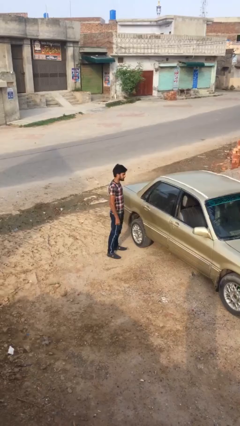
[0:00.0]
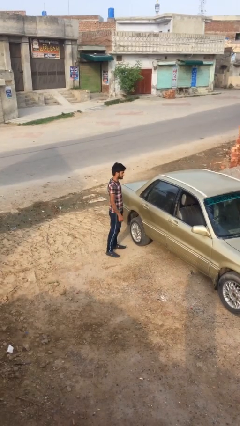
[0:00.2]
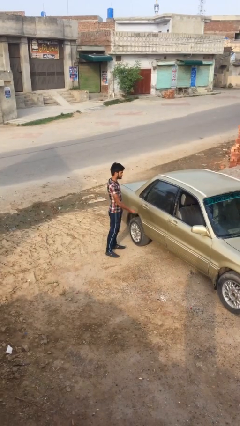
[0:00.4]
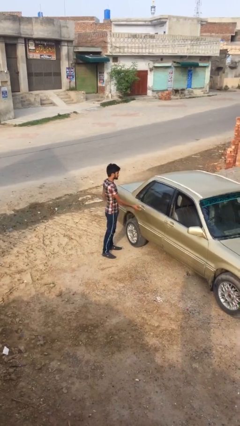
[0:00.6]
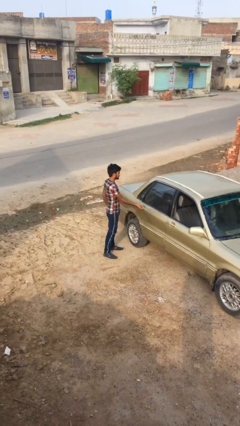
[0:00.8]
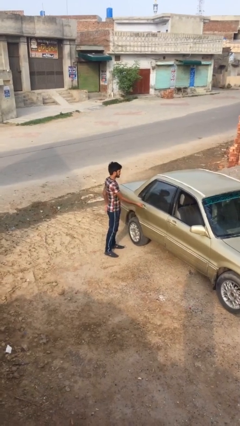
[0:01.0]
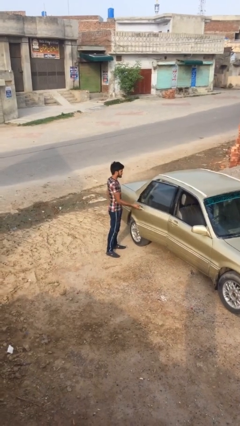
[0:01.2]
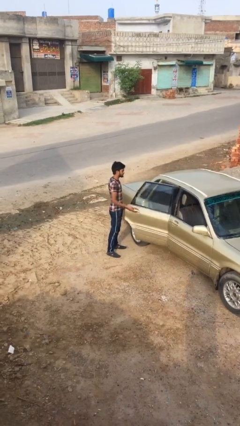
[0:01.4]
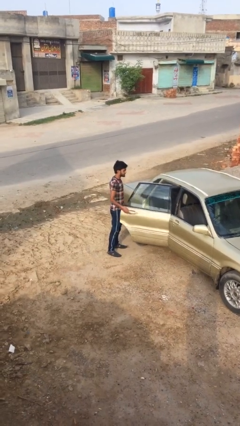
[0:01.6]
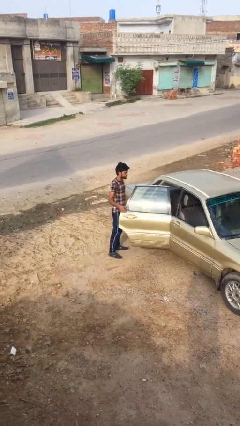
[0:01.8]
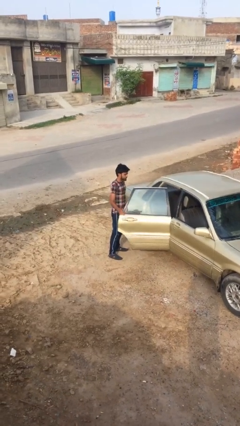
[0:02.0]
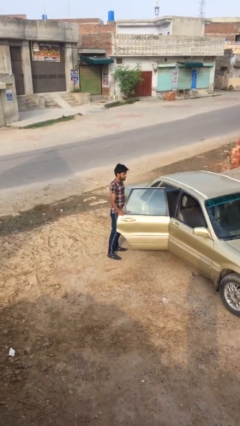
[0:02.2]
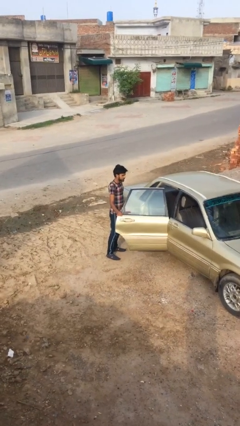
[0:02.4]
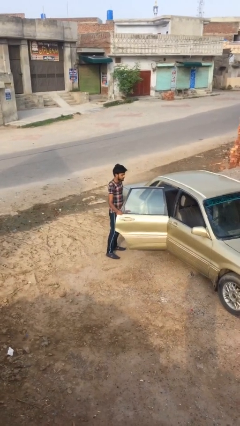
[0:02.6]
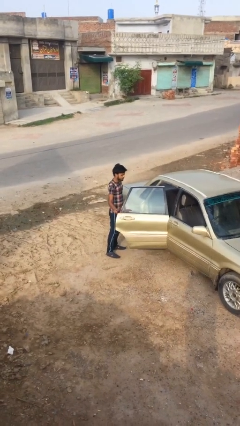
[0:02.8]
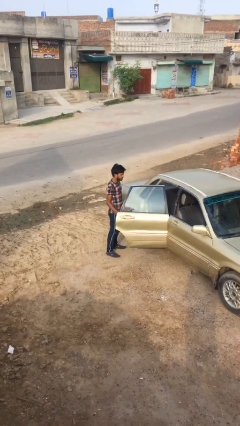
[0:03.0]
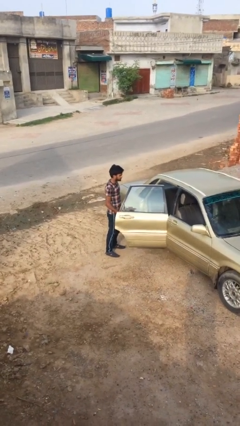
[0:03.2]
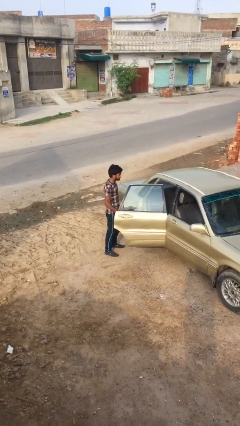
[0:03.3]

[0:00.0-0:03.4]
person opens car door

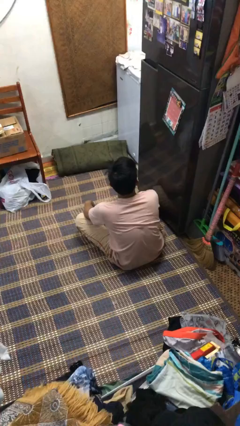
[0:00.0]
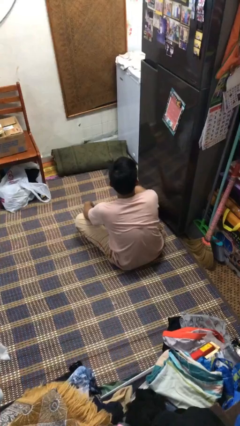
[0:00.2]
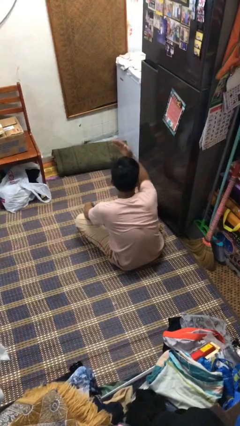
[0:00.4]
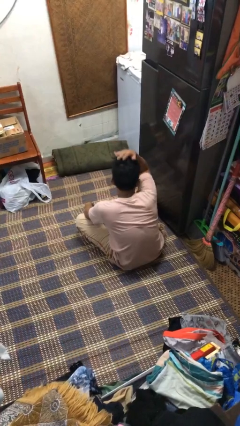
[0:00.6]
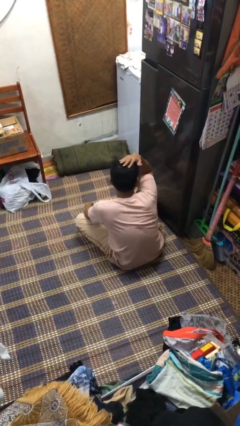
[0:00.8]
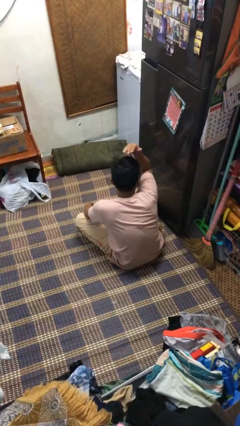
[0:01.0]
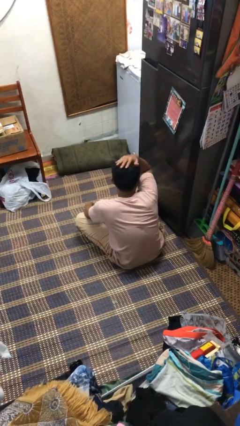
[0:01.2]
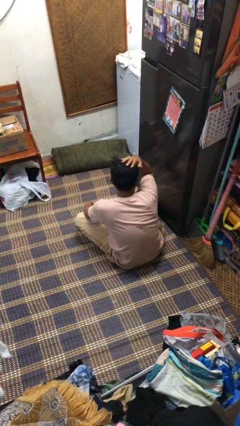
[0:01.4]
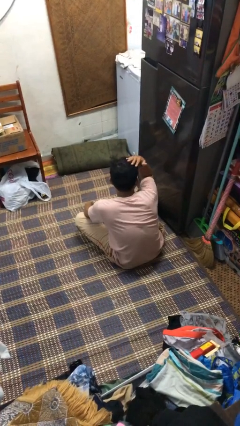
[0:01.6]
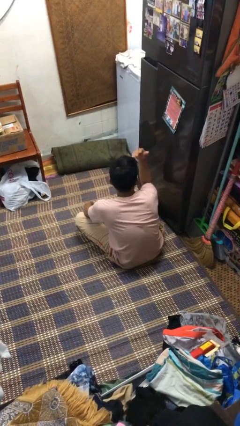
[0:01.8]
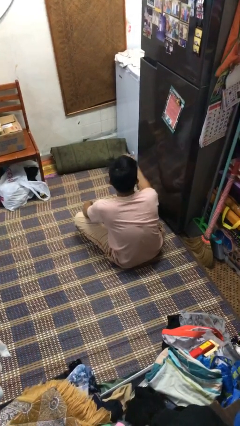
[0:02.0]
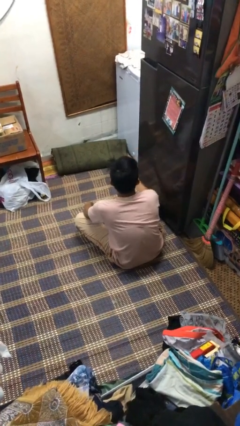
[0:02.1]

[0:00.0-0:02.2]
person pats head

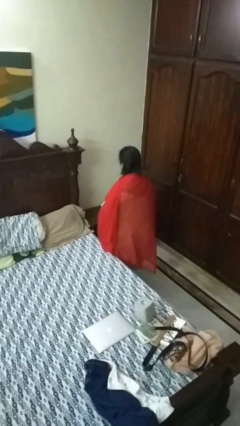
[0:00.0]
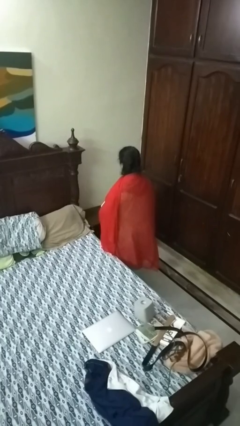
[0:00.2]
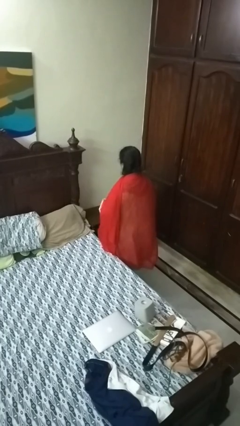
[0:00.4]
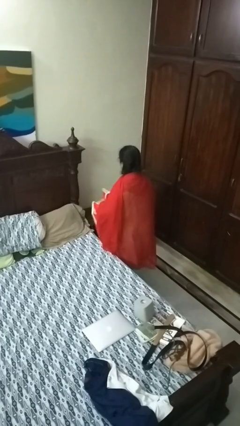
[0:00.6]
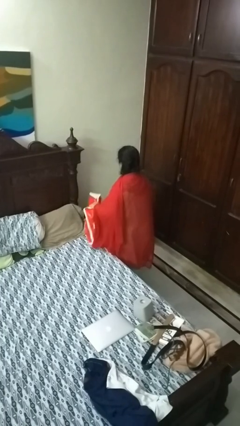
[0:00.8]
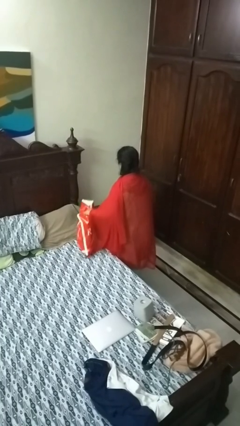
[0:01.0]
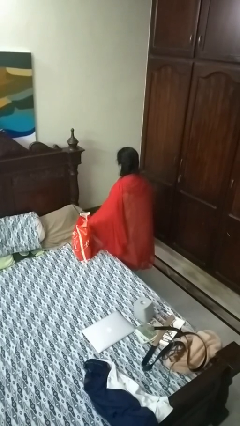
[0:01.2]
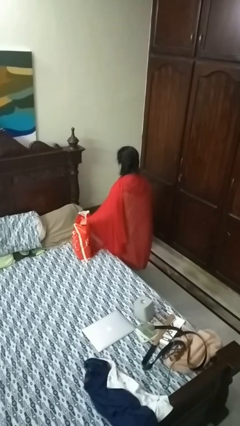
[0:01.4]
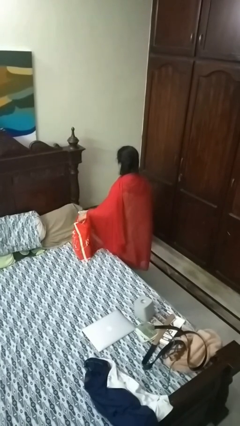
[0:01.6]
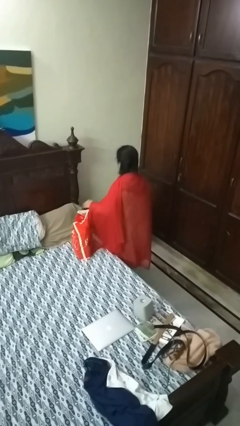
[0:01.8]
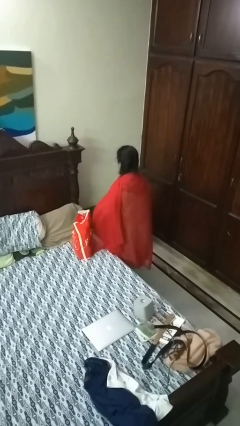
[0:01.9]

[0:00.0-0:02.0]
person puts down object on bed

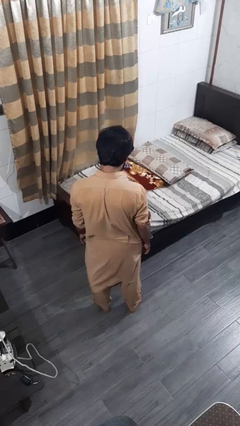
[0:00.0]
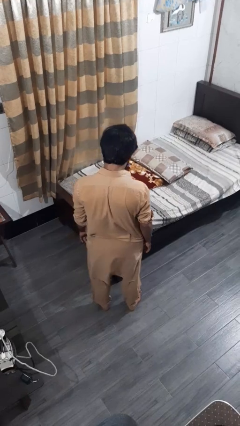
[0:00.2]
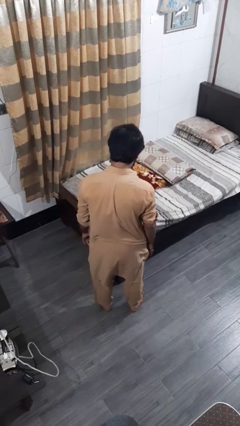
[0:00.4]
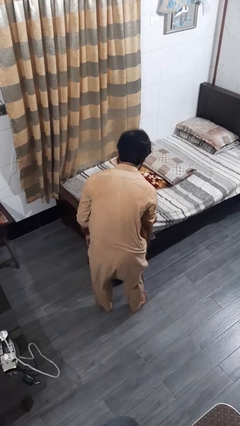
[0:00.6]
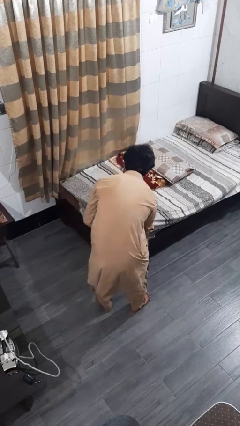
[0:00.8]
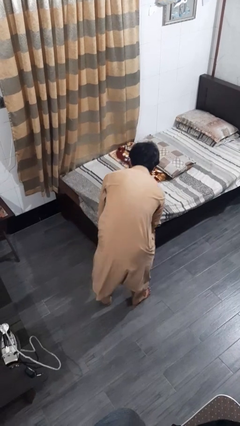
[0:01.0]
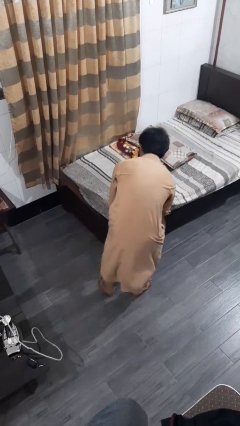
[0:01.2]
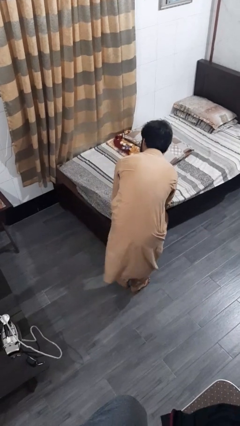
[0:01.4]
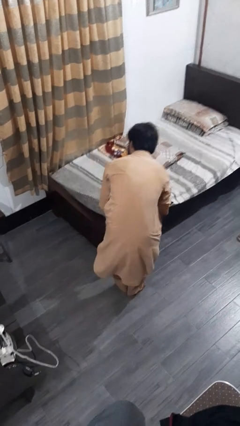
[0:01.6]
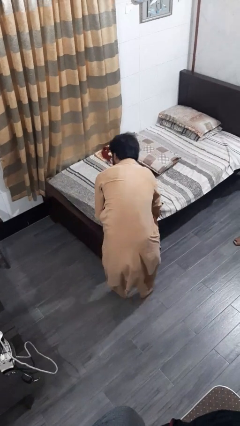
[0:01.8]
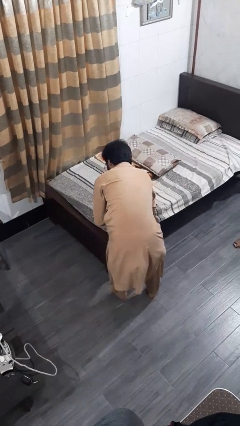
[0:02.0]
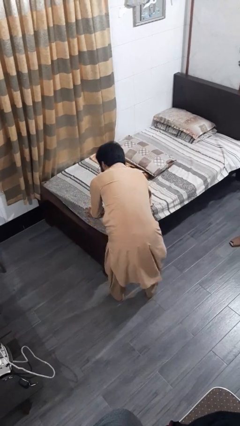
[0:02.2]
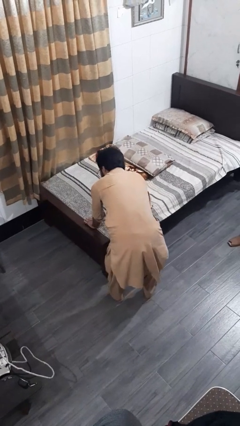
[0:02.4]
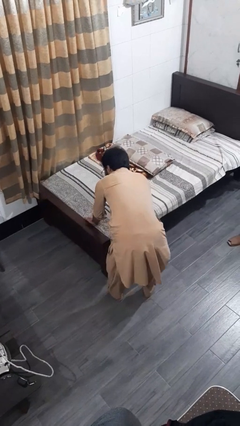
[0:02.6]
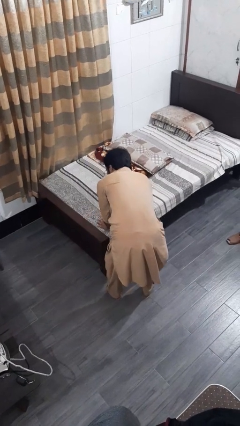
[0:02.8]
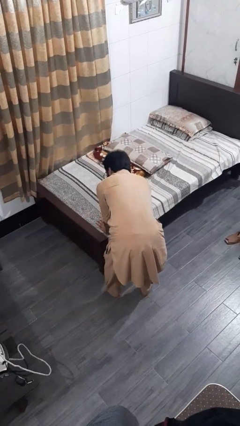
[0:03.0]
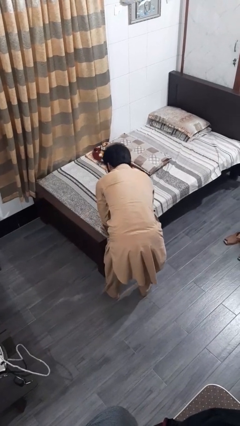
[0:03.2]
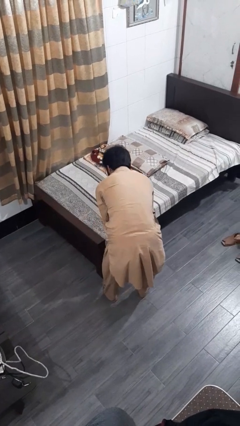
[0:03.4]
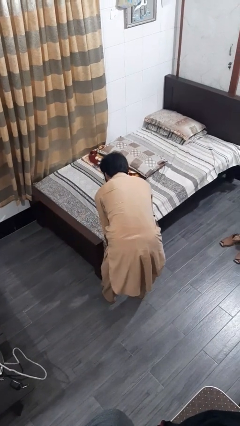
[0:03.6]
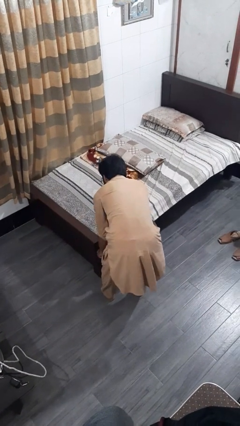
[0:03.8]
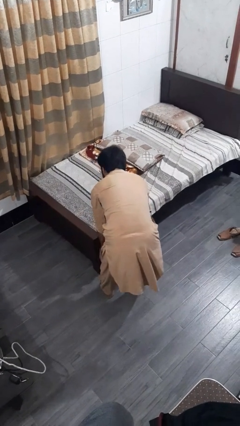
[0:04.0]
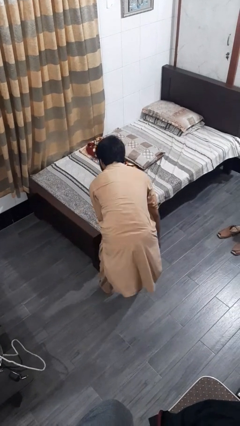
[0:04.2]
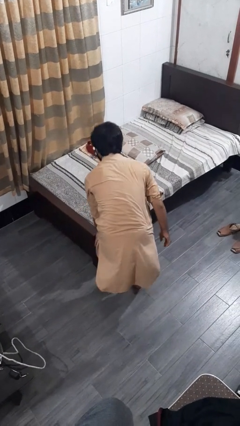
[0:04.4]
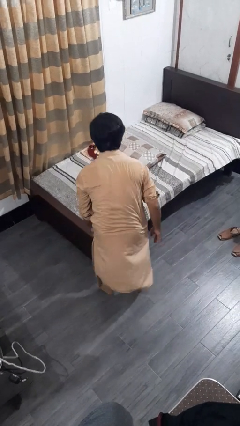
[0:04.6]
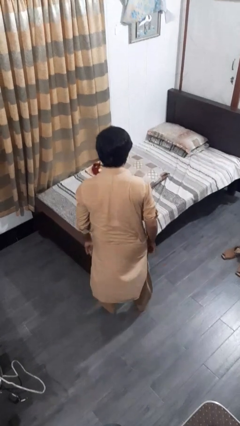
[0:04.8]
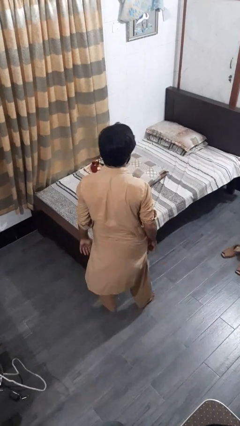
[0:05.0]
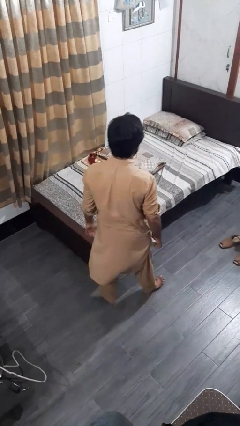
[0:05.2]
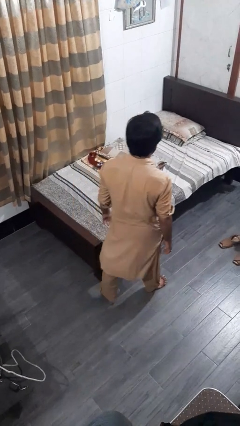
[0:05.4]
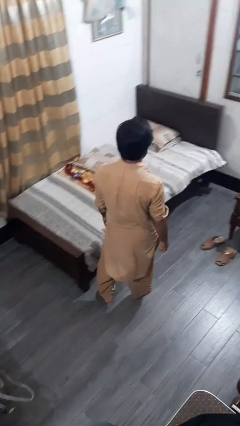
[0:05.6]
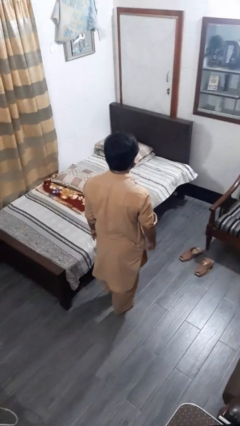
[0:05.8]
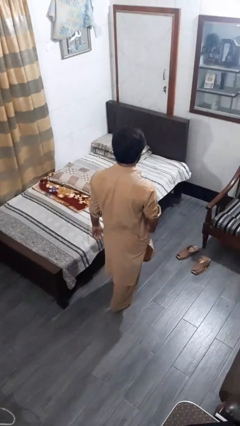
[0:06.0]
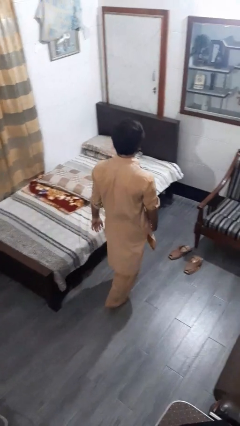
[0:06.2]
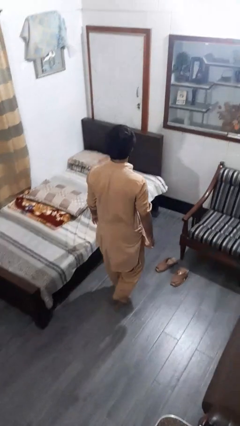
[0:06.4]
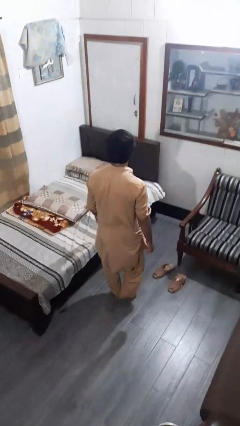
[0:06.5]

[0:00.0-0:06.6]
person makes bed

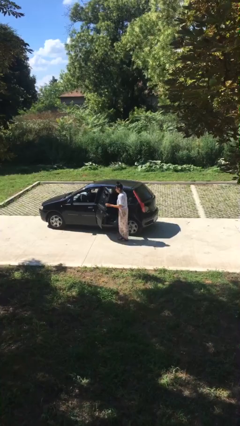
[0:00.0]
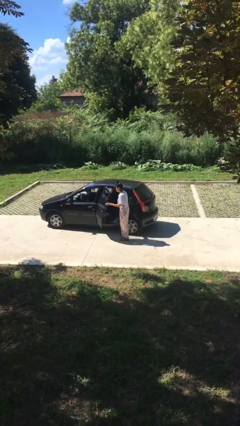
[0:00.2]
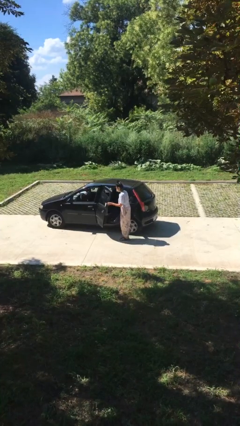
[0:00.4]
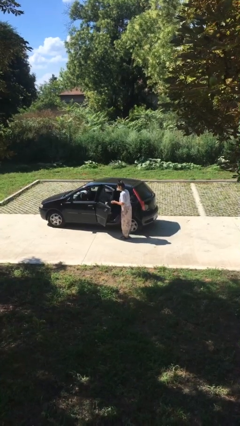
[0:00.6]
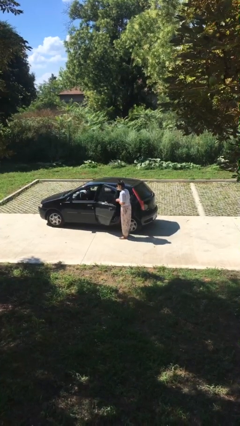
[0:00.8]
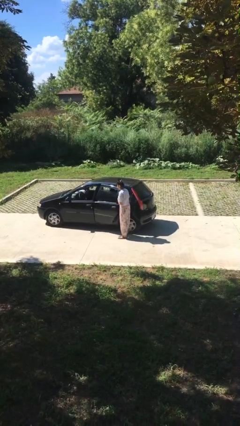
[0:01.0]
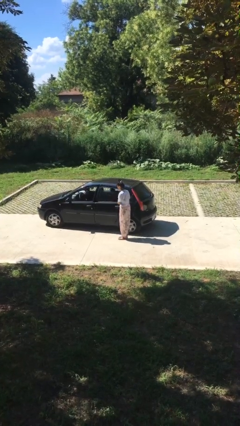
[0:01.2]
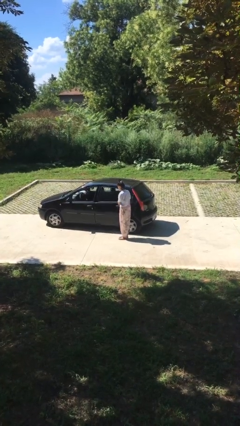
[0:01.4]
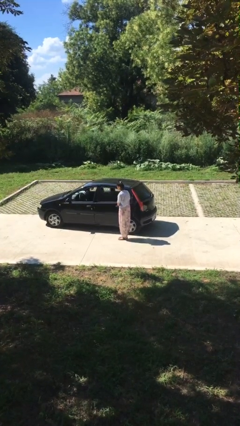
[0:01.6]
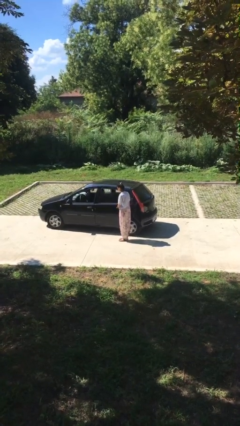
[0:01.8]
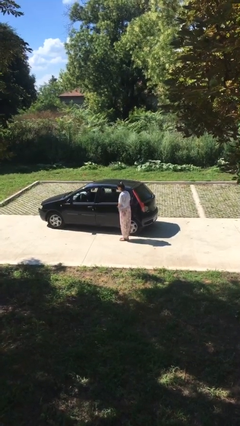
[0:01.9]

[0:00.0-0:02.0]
person closes car door

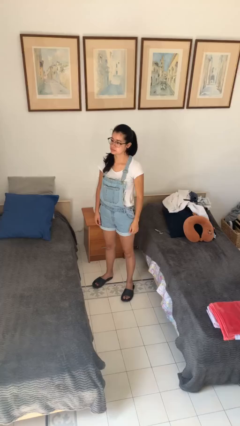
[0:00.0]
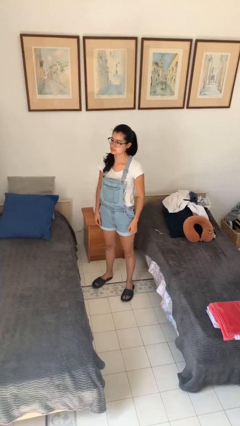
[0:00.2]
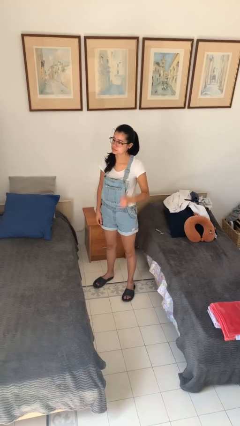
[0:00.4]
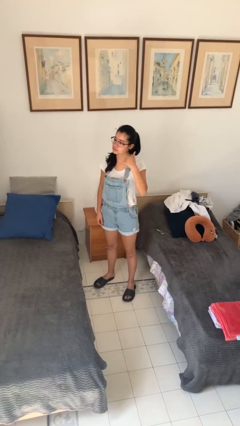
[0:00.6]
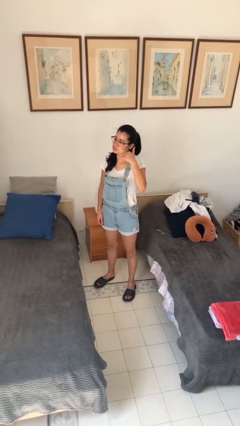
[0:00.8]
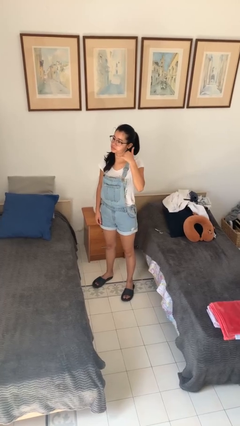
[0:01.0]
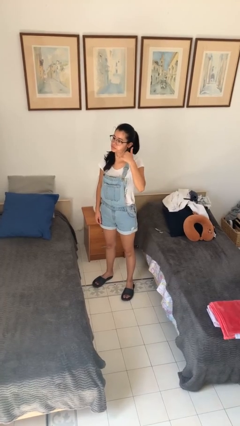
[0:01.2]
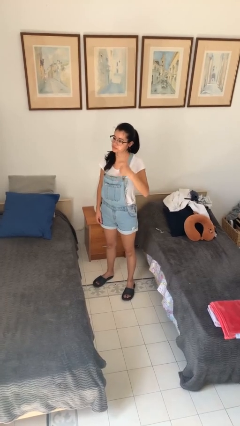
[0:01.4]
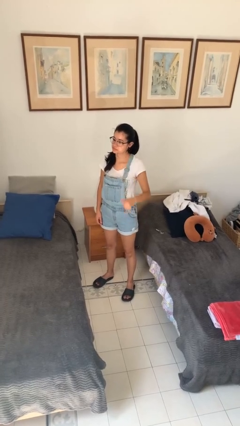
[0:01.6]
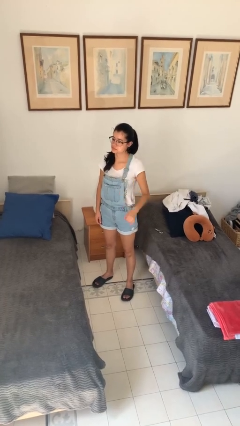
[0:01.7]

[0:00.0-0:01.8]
person gestures call me
